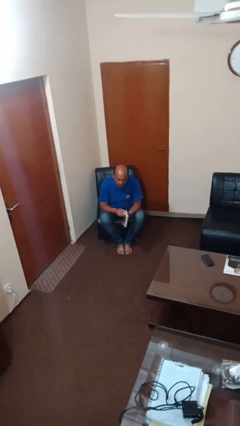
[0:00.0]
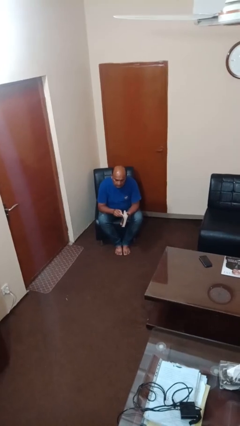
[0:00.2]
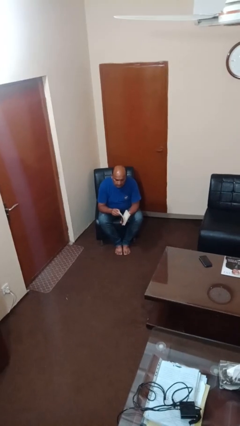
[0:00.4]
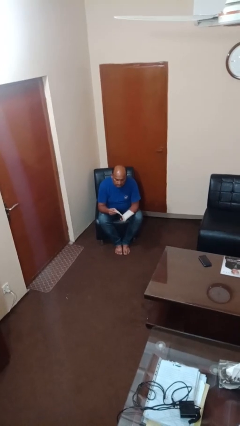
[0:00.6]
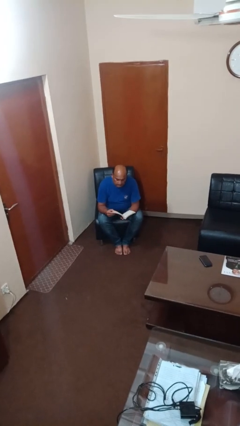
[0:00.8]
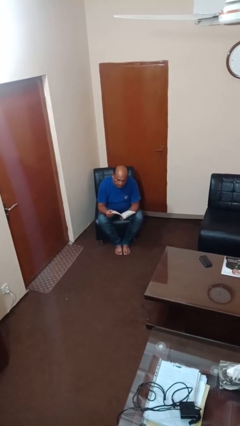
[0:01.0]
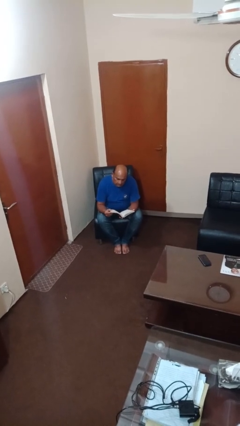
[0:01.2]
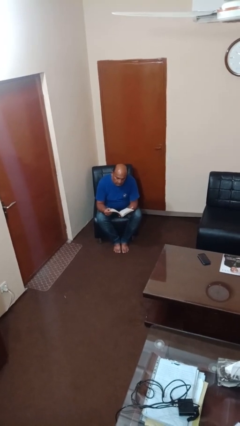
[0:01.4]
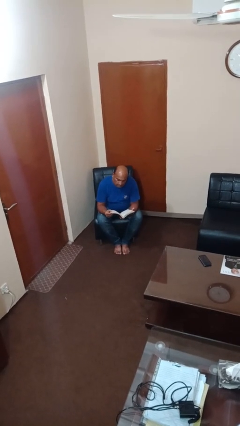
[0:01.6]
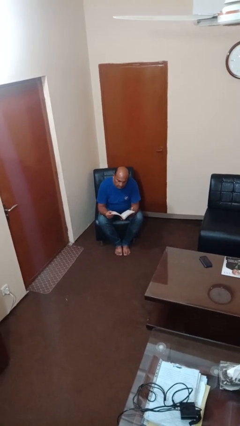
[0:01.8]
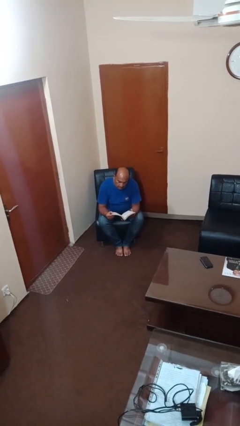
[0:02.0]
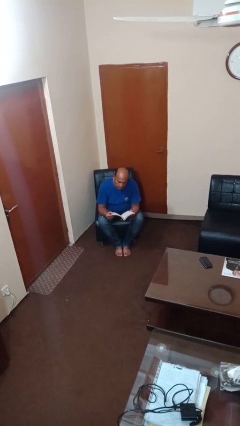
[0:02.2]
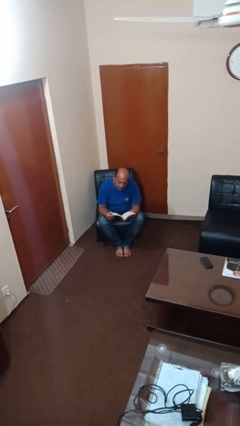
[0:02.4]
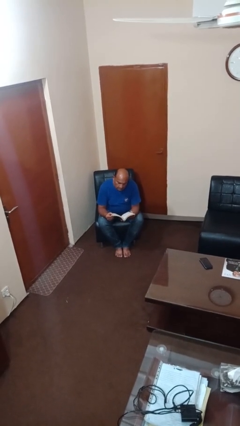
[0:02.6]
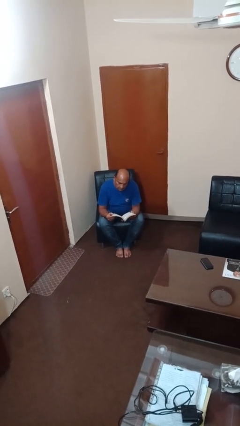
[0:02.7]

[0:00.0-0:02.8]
person reads book

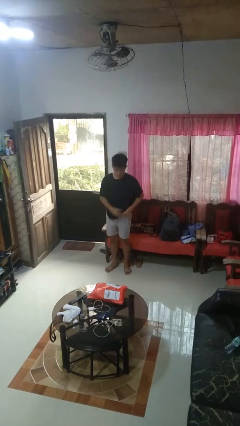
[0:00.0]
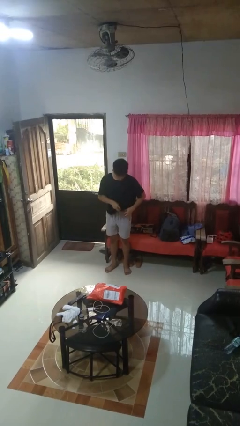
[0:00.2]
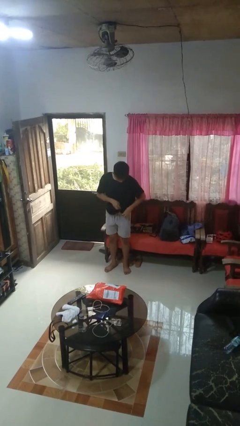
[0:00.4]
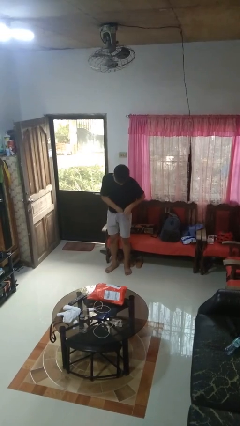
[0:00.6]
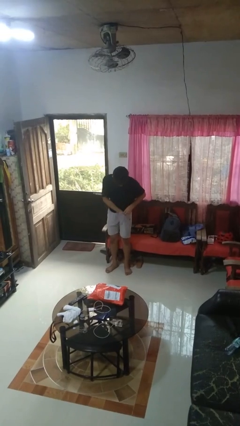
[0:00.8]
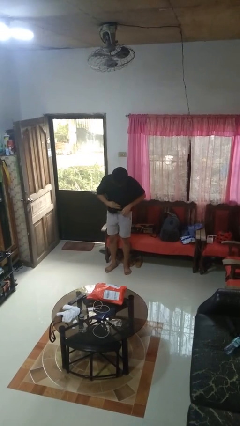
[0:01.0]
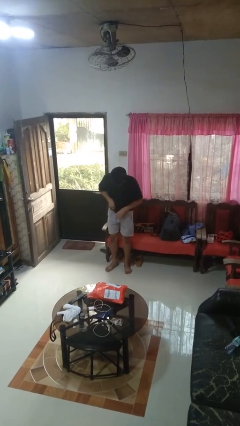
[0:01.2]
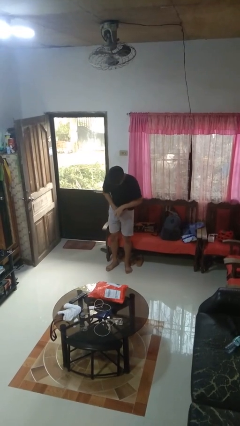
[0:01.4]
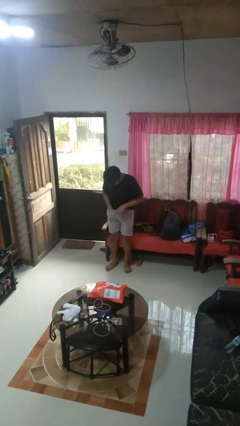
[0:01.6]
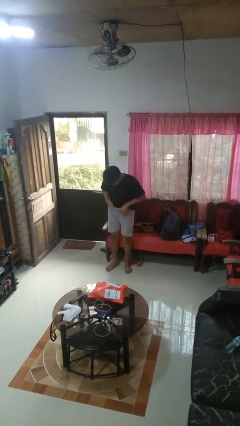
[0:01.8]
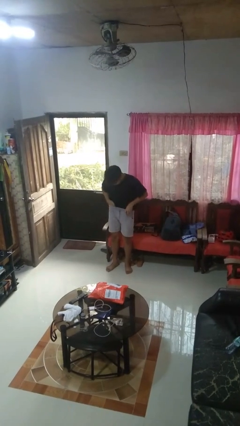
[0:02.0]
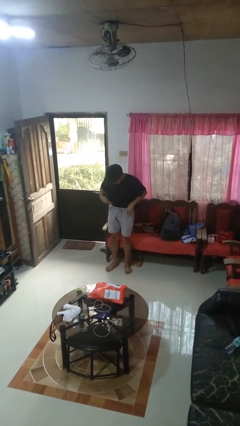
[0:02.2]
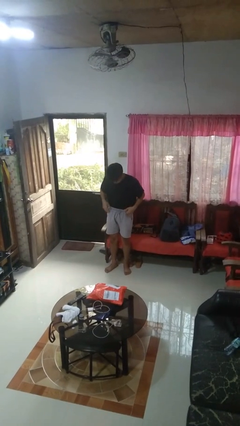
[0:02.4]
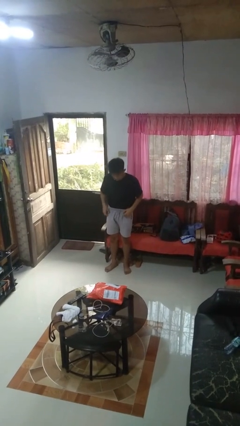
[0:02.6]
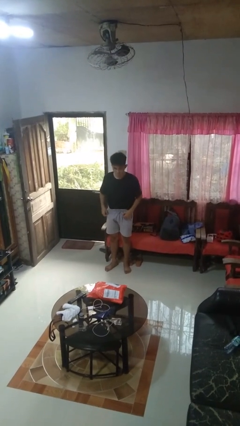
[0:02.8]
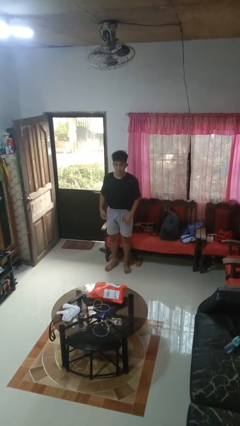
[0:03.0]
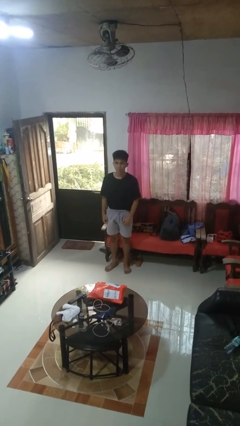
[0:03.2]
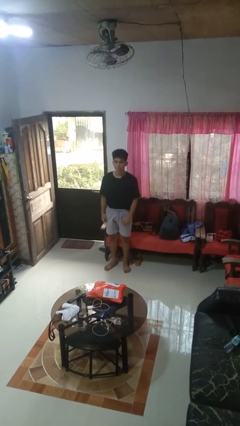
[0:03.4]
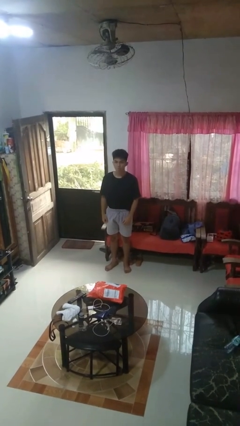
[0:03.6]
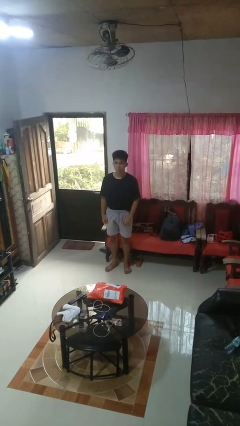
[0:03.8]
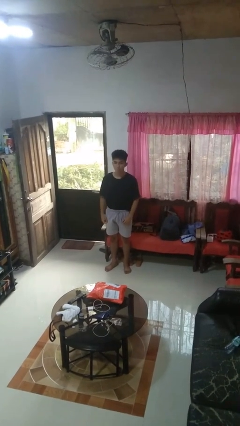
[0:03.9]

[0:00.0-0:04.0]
person tucks in shirt

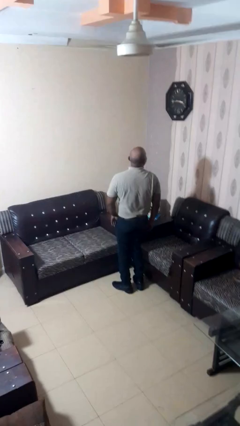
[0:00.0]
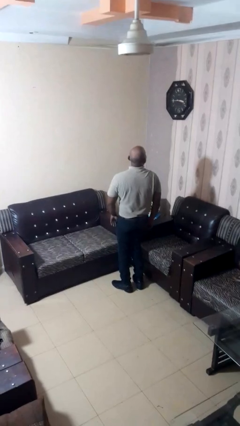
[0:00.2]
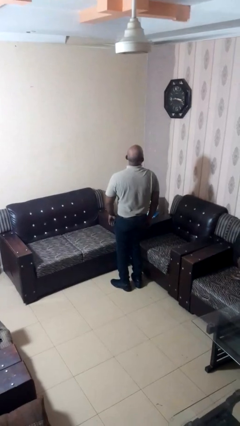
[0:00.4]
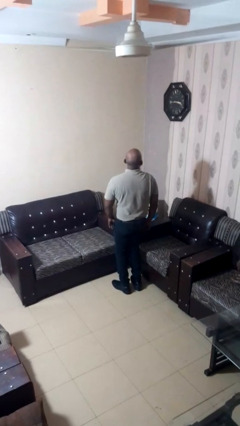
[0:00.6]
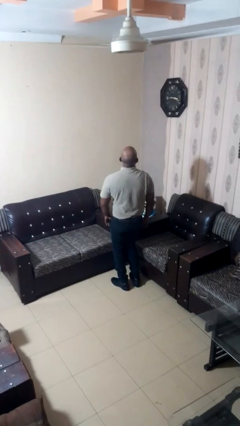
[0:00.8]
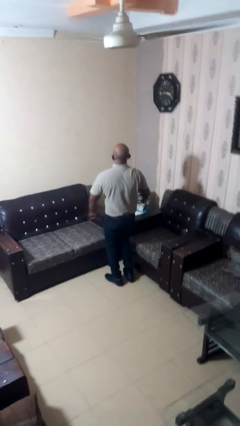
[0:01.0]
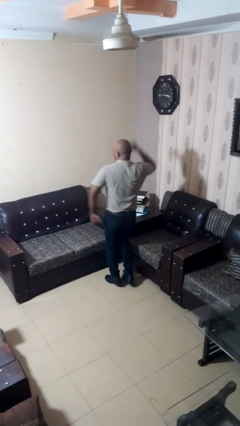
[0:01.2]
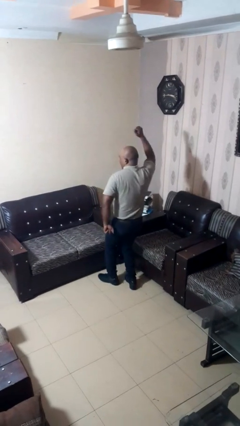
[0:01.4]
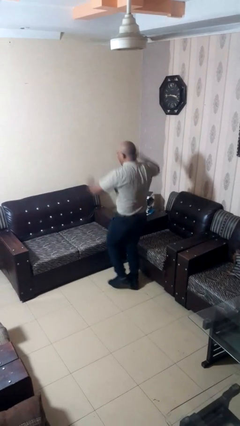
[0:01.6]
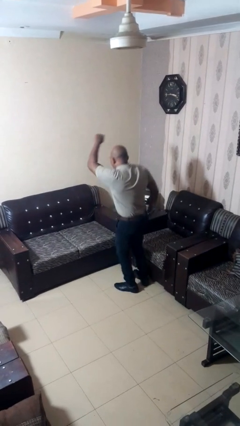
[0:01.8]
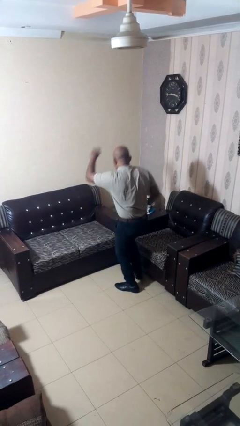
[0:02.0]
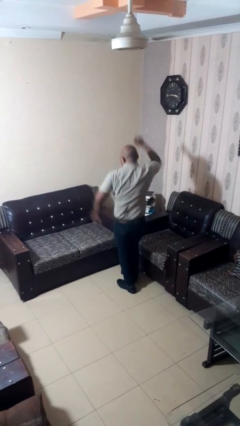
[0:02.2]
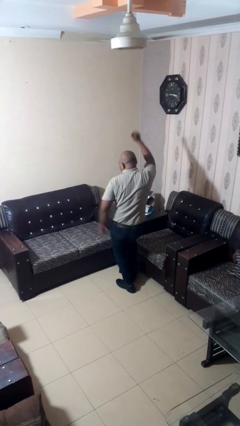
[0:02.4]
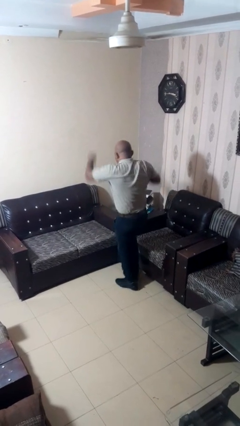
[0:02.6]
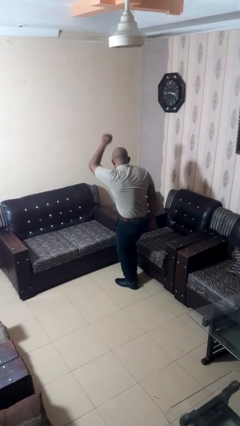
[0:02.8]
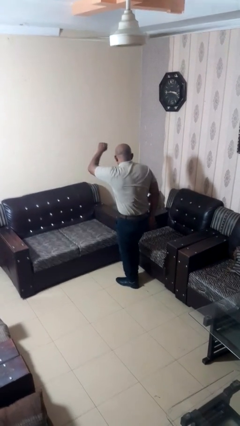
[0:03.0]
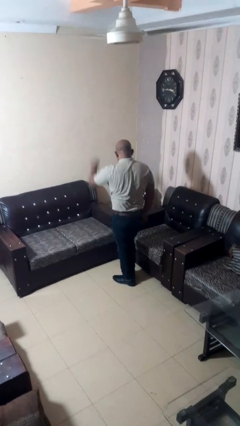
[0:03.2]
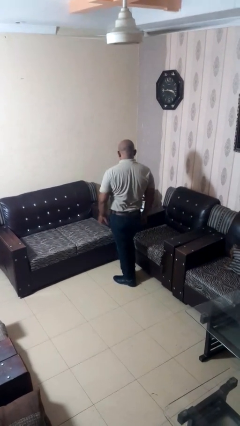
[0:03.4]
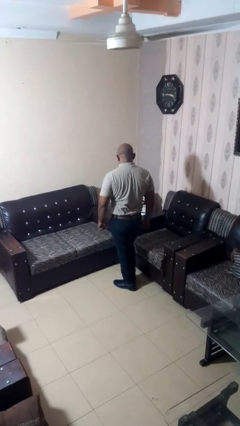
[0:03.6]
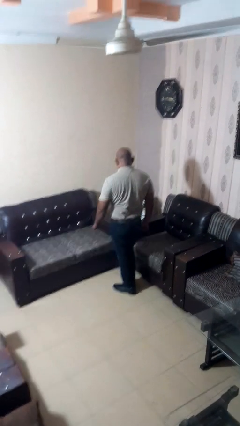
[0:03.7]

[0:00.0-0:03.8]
person dances in place

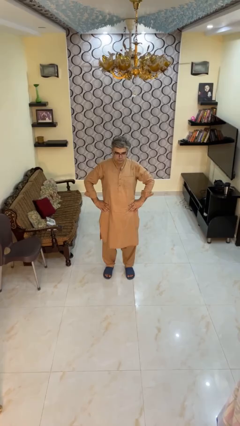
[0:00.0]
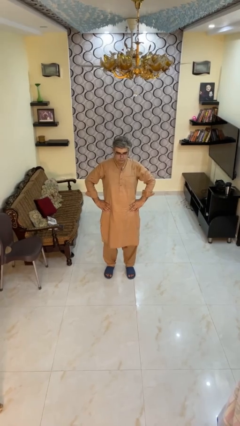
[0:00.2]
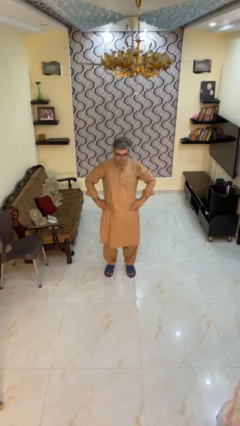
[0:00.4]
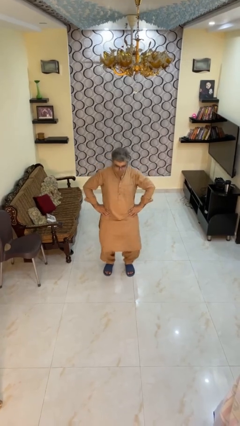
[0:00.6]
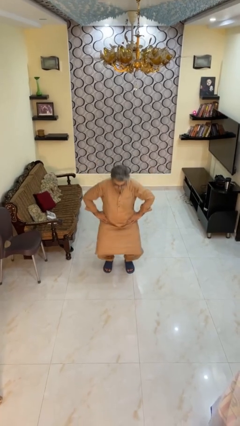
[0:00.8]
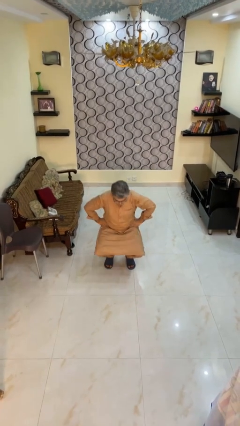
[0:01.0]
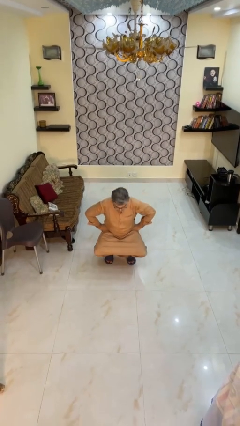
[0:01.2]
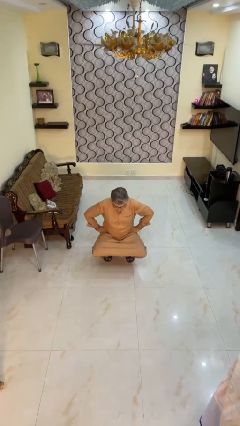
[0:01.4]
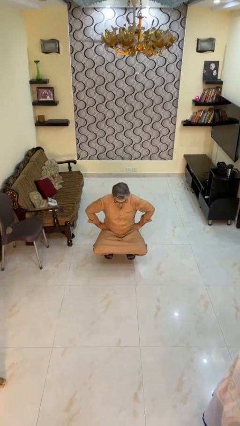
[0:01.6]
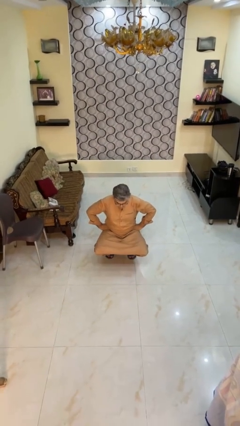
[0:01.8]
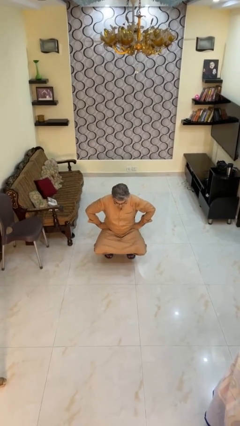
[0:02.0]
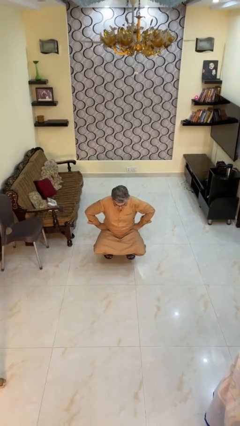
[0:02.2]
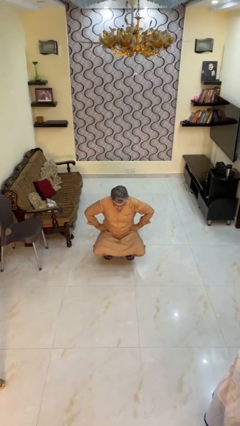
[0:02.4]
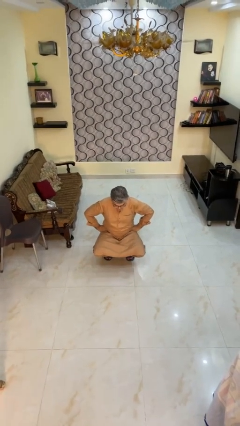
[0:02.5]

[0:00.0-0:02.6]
person squats

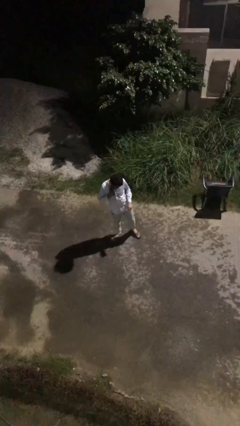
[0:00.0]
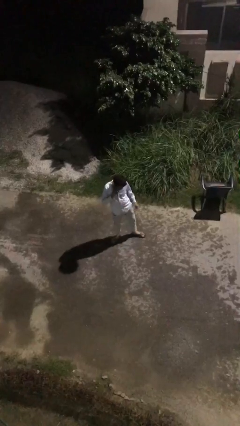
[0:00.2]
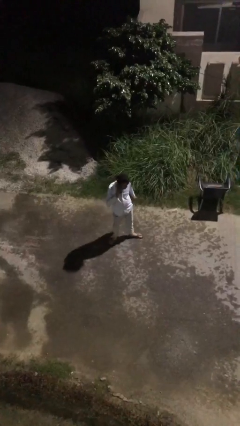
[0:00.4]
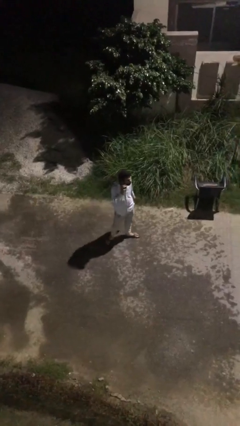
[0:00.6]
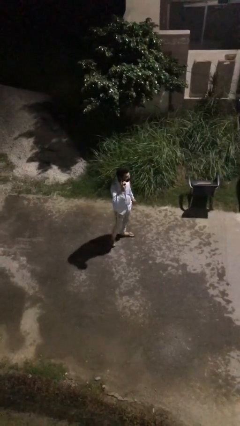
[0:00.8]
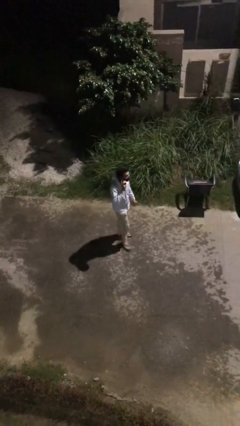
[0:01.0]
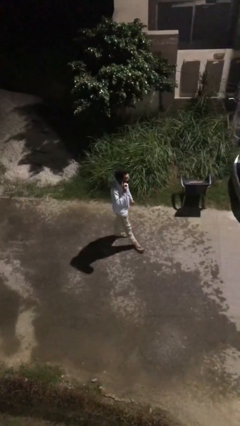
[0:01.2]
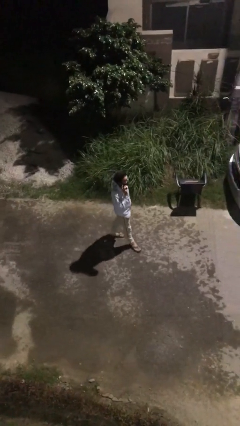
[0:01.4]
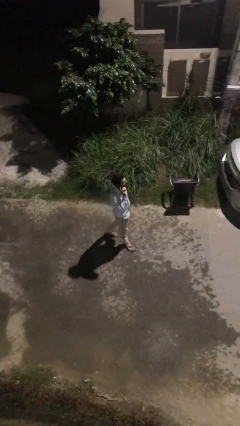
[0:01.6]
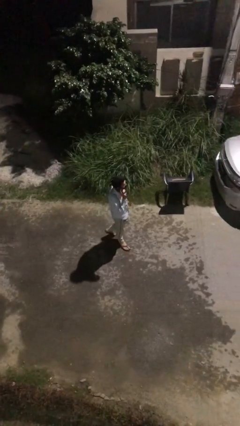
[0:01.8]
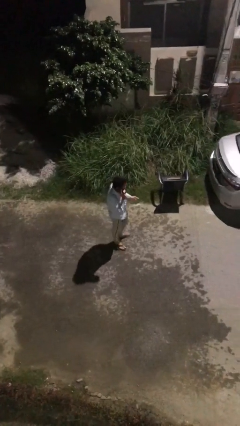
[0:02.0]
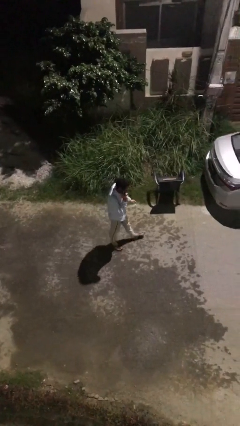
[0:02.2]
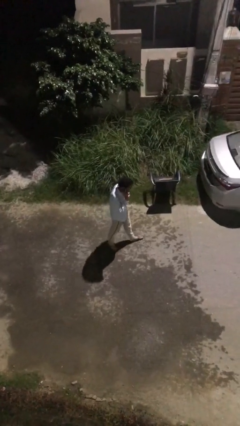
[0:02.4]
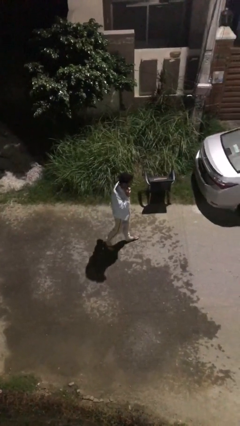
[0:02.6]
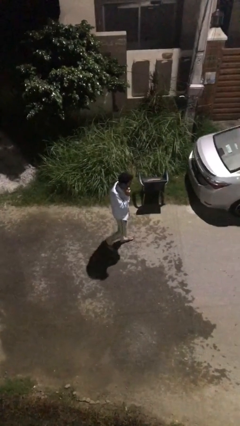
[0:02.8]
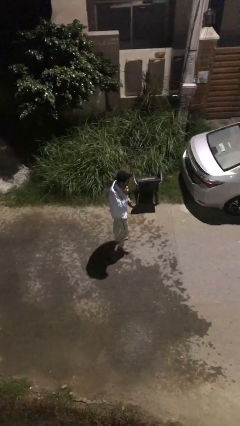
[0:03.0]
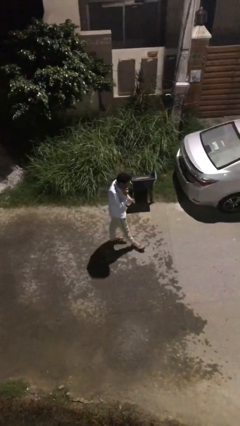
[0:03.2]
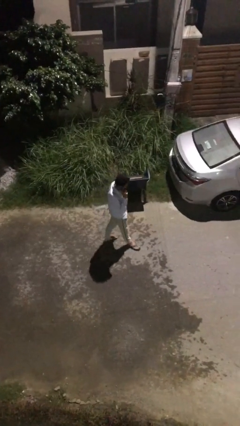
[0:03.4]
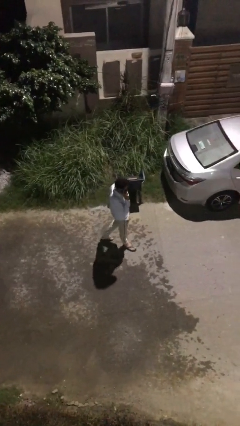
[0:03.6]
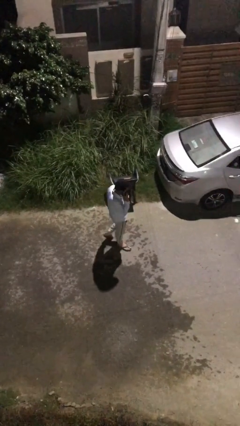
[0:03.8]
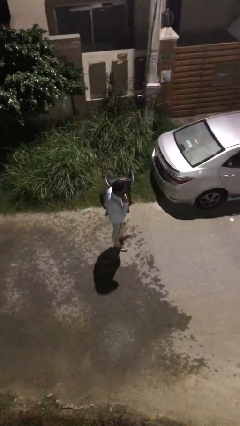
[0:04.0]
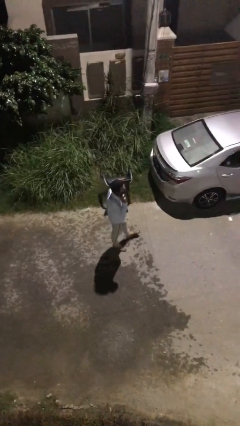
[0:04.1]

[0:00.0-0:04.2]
person talks on phone
